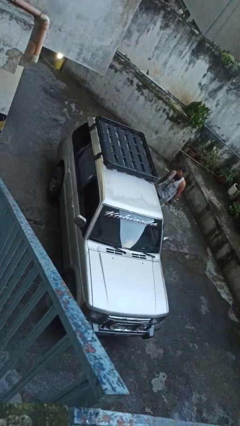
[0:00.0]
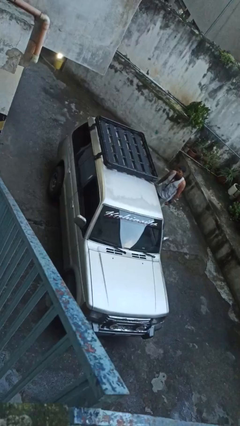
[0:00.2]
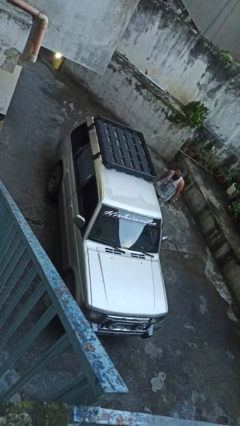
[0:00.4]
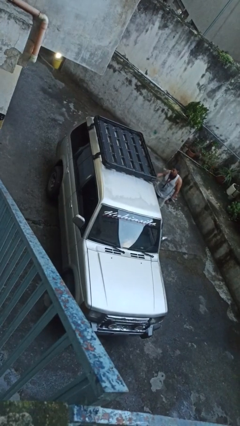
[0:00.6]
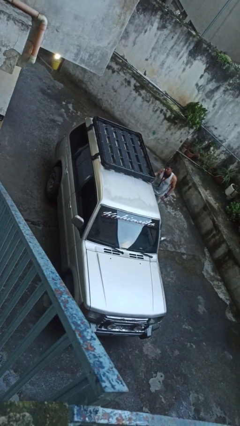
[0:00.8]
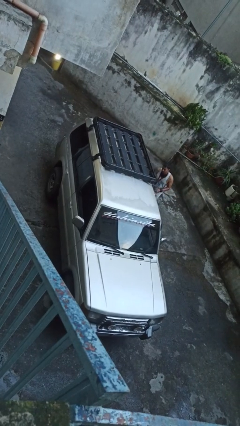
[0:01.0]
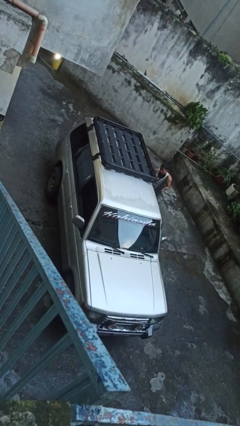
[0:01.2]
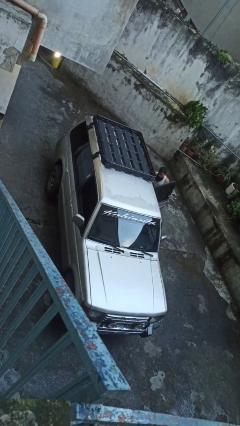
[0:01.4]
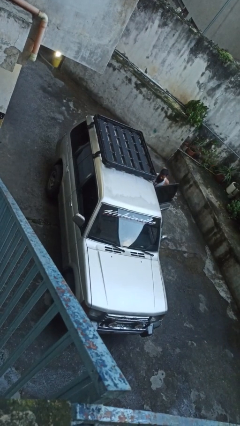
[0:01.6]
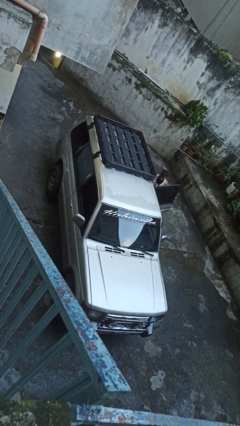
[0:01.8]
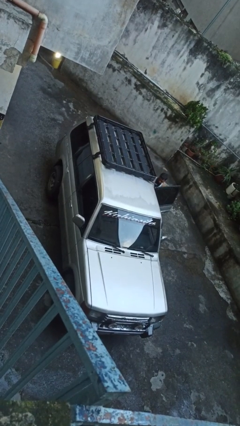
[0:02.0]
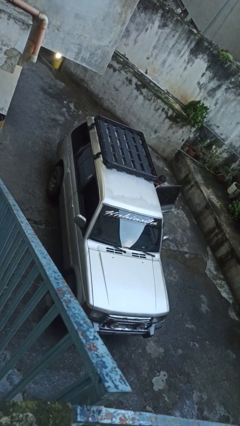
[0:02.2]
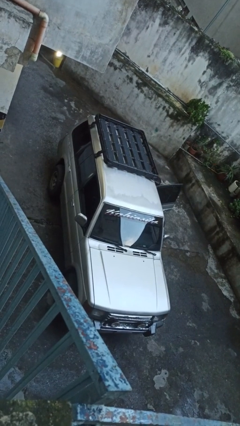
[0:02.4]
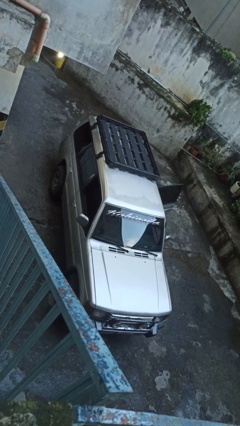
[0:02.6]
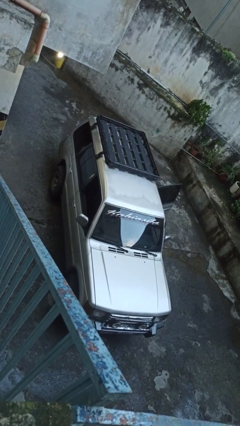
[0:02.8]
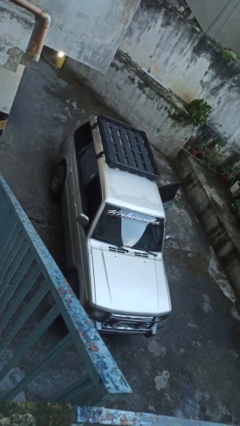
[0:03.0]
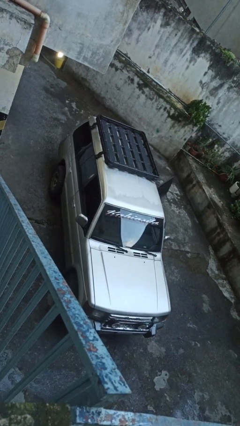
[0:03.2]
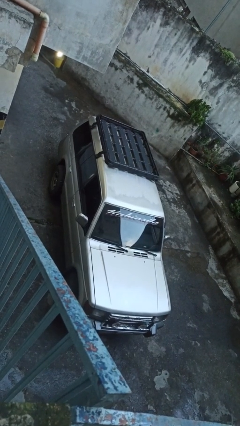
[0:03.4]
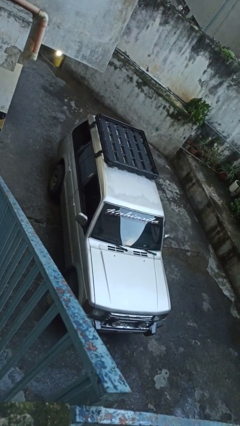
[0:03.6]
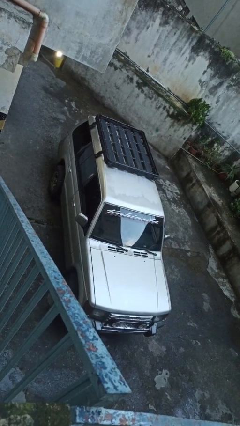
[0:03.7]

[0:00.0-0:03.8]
car picks up person

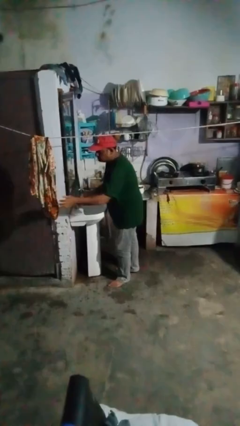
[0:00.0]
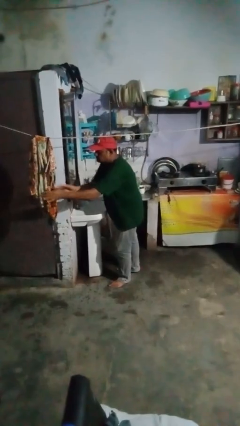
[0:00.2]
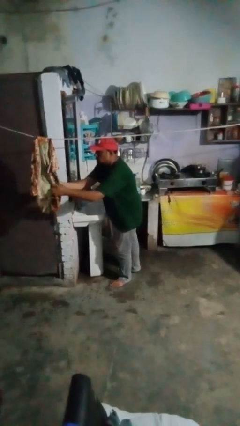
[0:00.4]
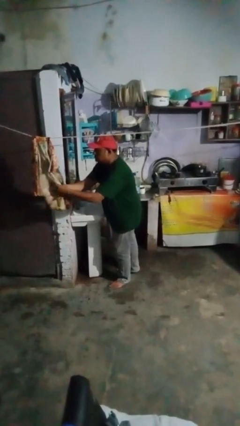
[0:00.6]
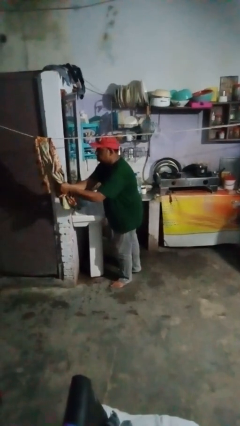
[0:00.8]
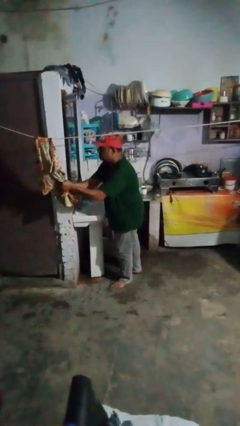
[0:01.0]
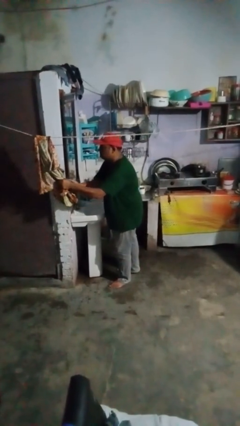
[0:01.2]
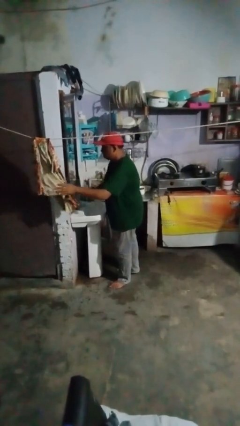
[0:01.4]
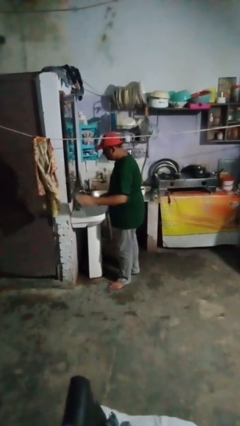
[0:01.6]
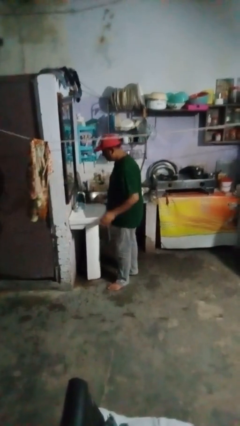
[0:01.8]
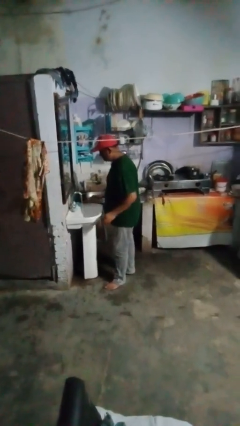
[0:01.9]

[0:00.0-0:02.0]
person dries hands with towel

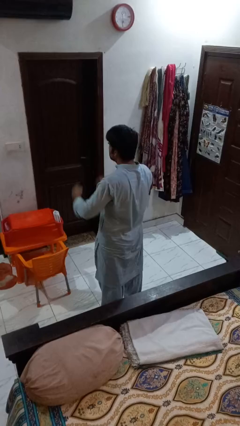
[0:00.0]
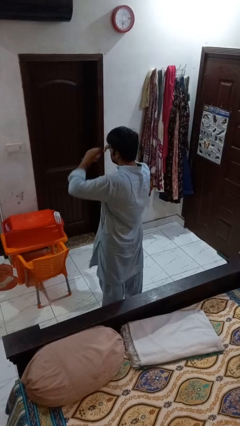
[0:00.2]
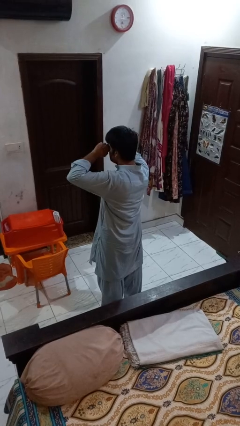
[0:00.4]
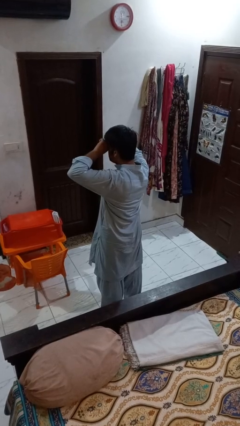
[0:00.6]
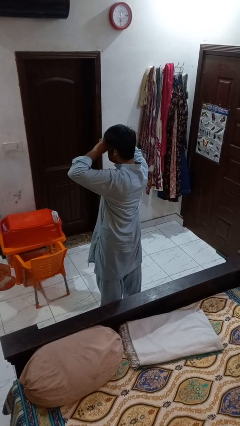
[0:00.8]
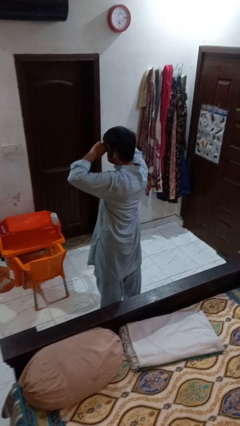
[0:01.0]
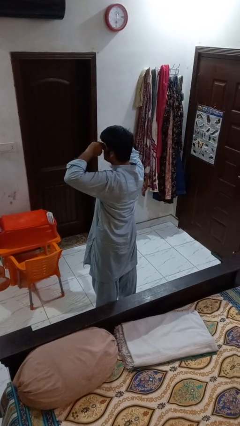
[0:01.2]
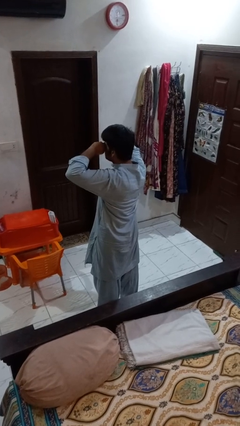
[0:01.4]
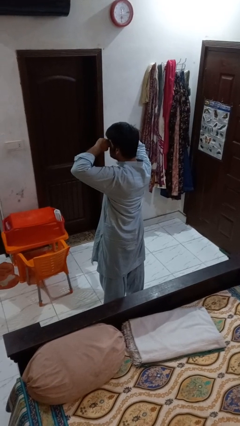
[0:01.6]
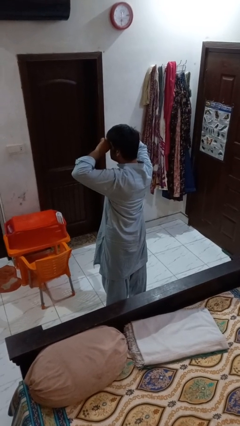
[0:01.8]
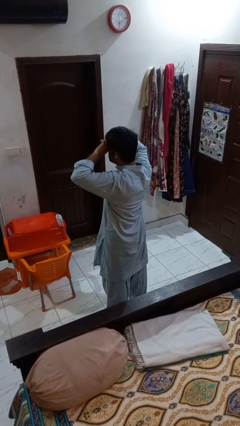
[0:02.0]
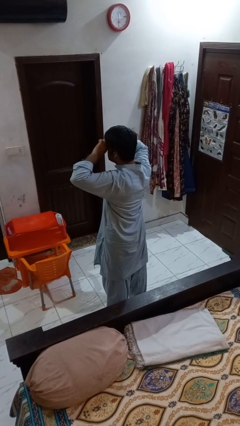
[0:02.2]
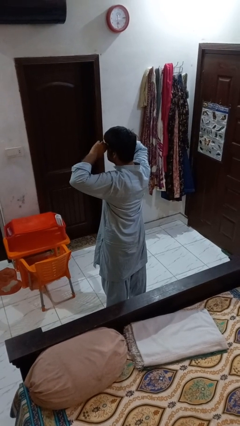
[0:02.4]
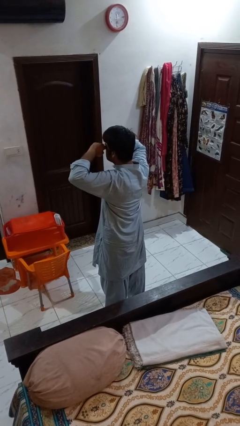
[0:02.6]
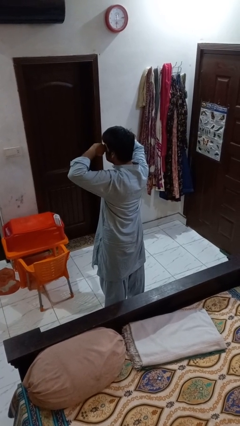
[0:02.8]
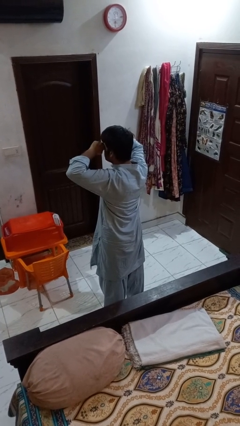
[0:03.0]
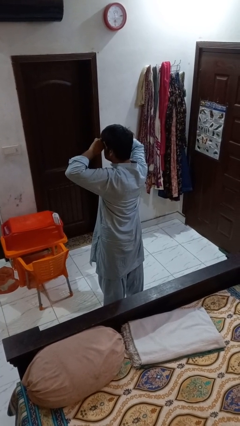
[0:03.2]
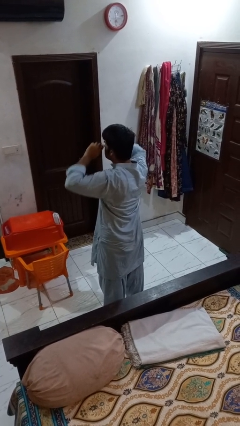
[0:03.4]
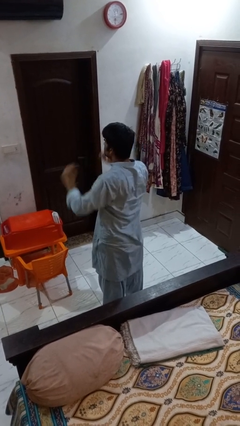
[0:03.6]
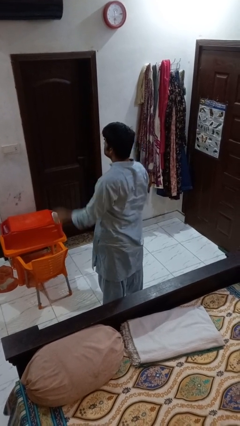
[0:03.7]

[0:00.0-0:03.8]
person rubs eyes

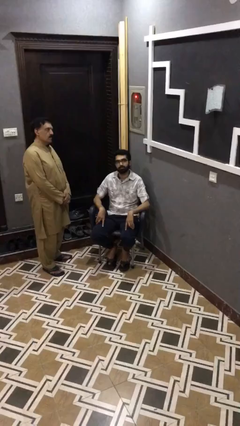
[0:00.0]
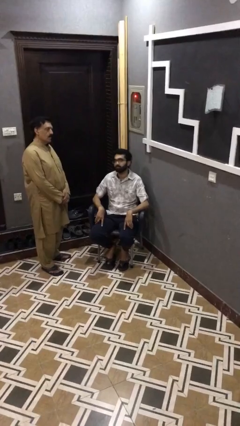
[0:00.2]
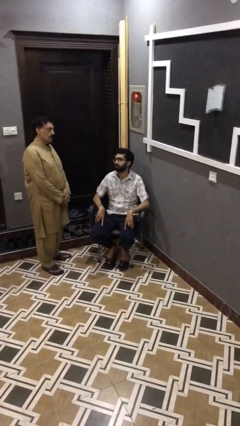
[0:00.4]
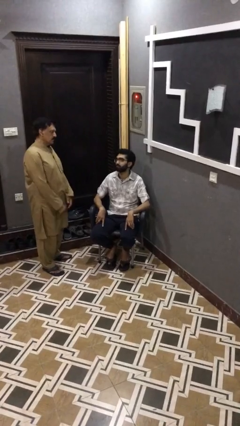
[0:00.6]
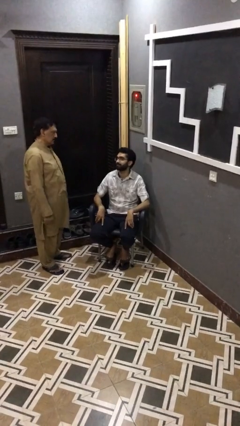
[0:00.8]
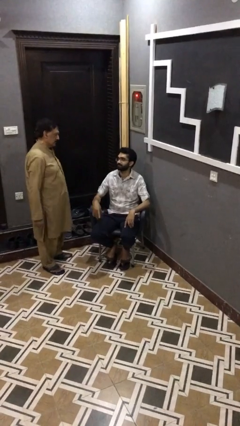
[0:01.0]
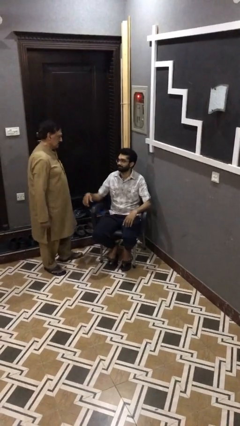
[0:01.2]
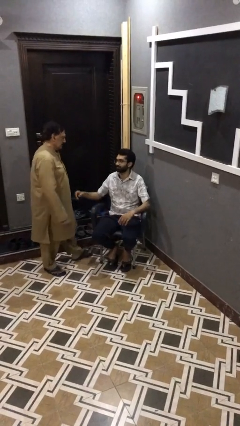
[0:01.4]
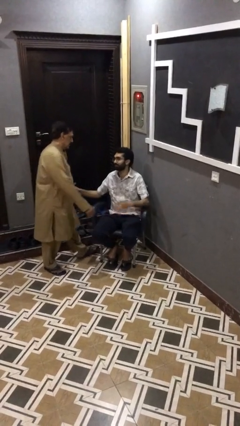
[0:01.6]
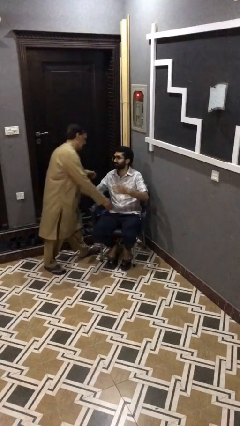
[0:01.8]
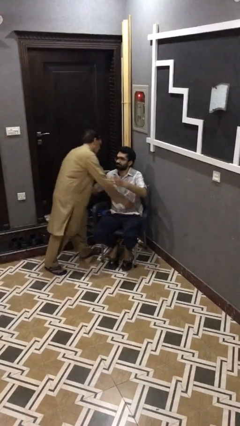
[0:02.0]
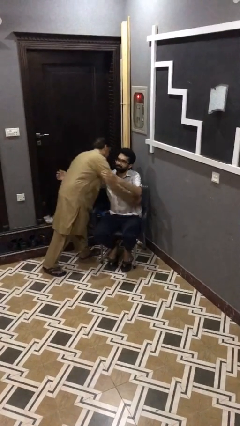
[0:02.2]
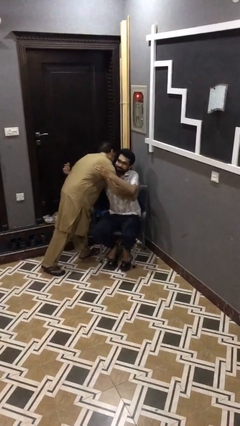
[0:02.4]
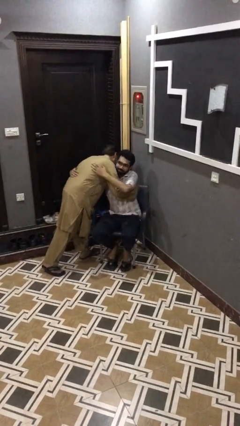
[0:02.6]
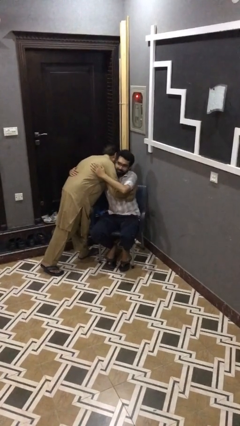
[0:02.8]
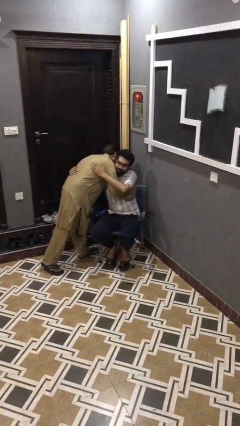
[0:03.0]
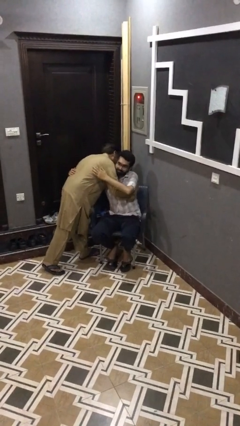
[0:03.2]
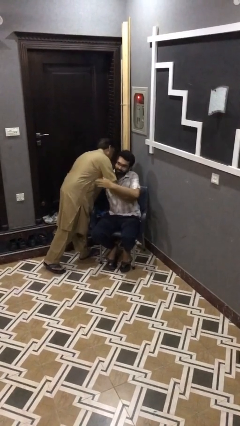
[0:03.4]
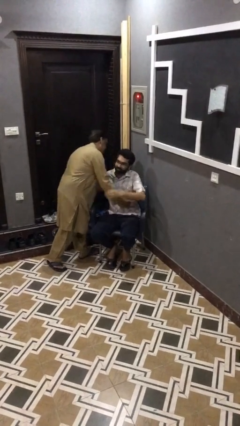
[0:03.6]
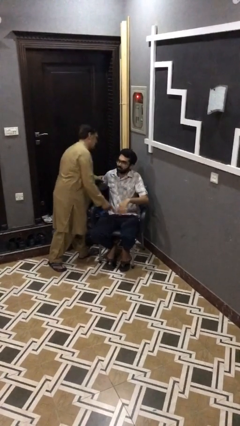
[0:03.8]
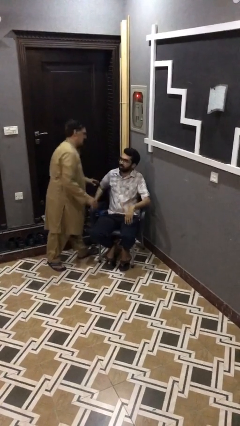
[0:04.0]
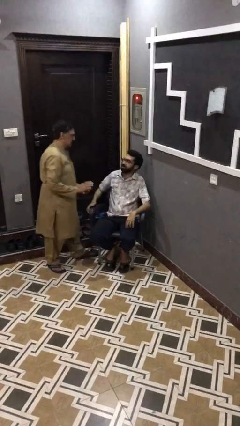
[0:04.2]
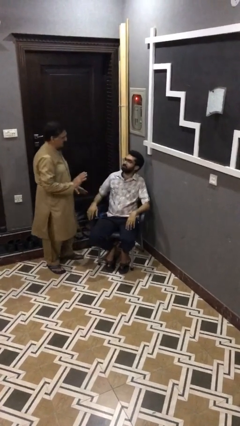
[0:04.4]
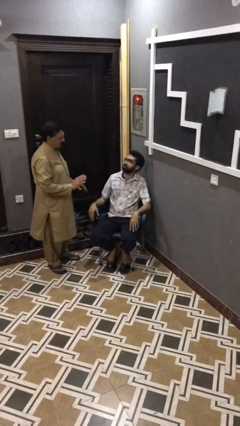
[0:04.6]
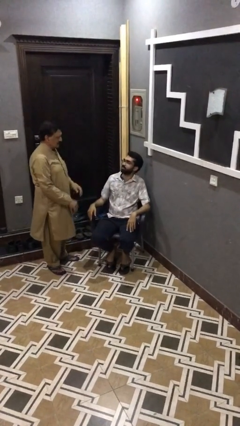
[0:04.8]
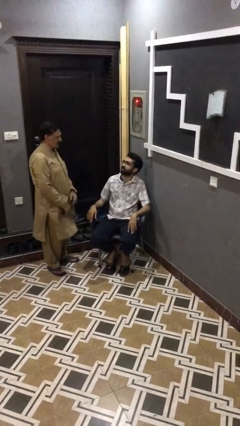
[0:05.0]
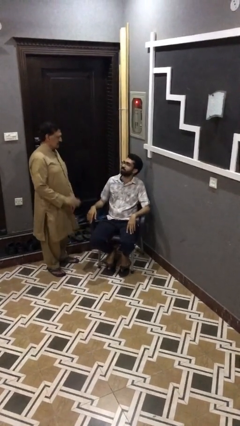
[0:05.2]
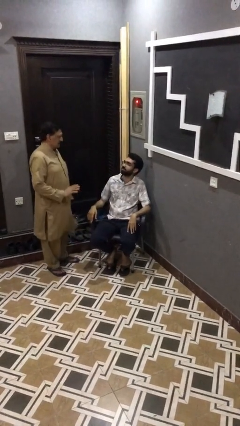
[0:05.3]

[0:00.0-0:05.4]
person embraces person

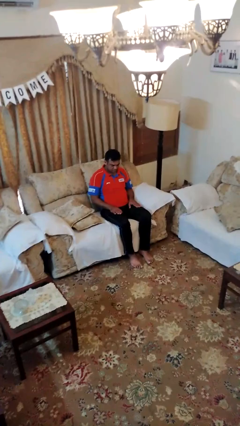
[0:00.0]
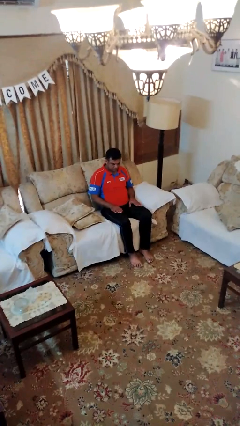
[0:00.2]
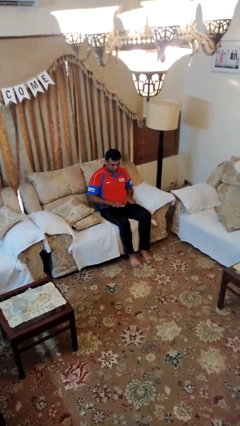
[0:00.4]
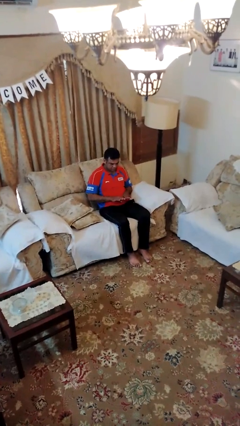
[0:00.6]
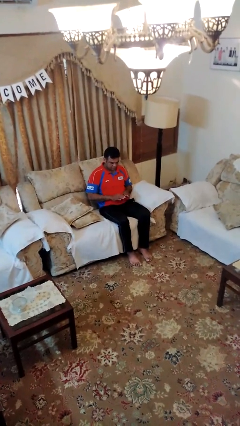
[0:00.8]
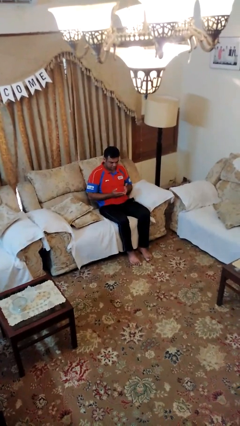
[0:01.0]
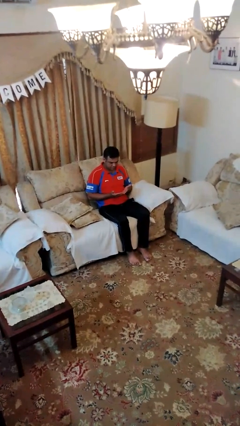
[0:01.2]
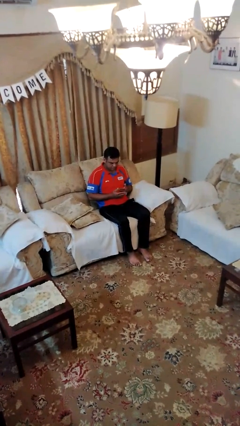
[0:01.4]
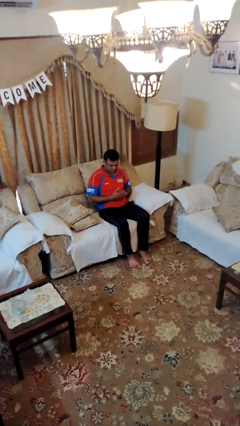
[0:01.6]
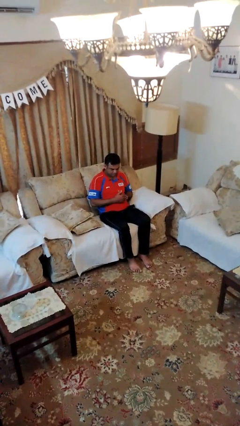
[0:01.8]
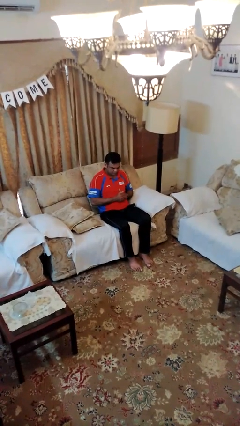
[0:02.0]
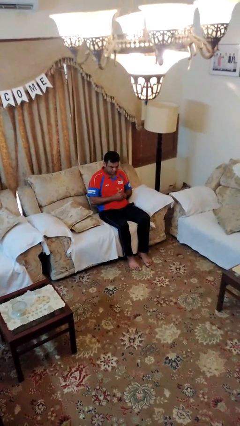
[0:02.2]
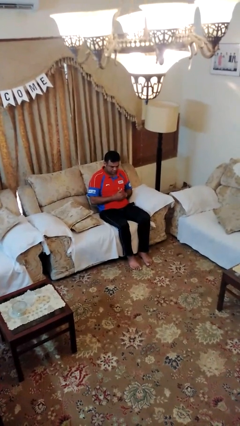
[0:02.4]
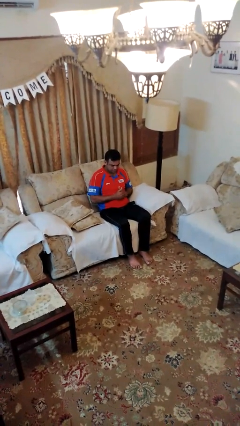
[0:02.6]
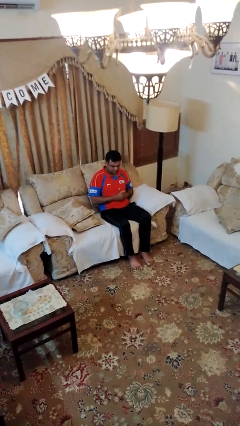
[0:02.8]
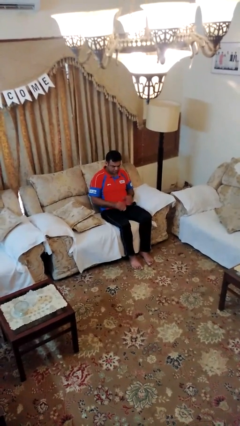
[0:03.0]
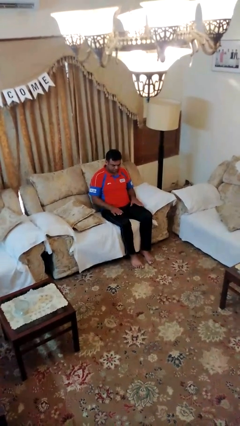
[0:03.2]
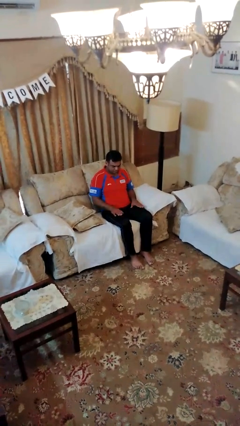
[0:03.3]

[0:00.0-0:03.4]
person looks at hands in lap
